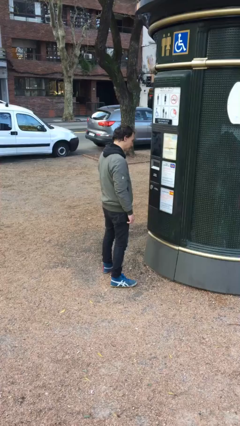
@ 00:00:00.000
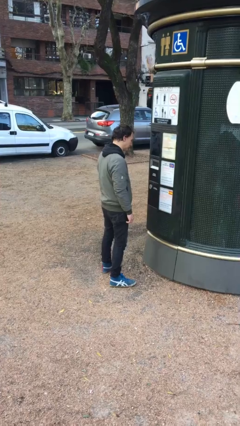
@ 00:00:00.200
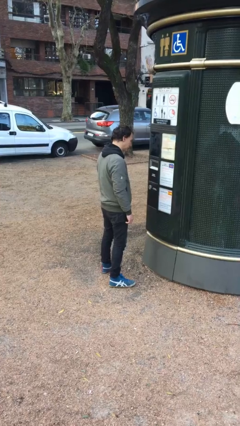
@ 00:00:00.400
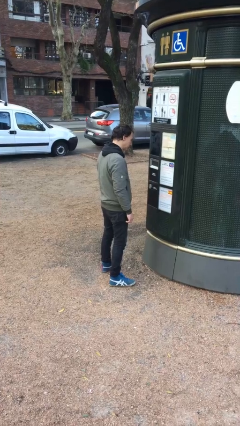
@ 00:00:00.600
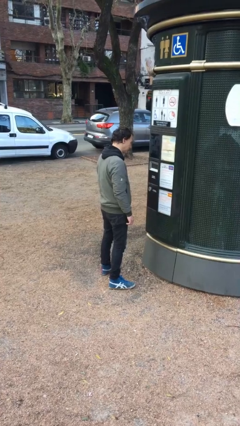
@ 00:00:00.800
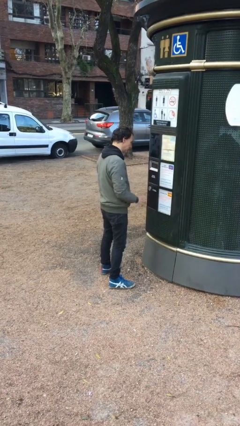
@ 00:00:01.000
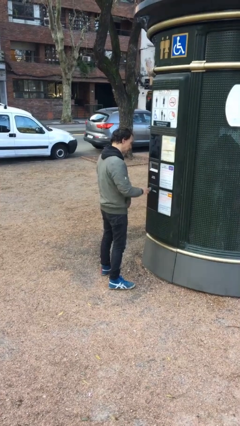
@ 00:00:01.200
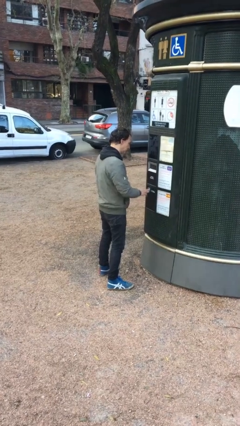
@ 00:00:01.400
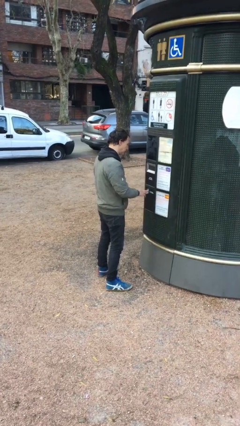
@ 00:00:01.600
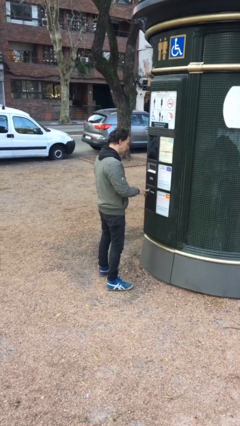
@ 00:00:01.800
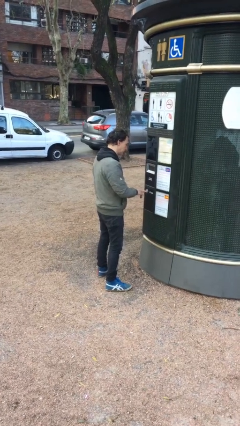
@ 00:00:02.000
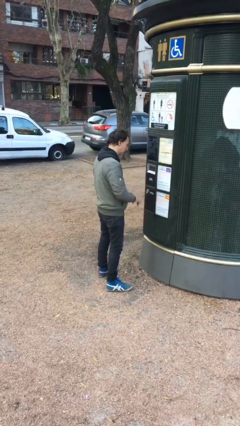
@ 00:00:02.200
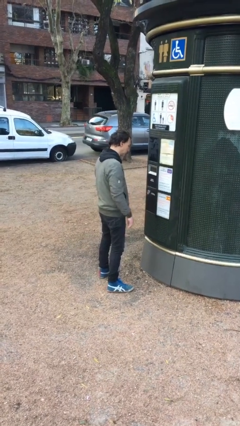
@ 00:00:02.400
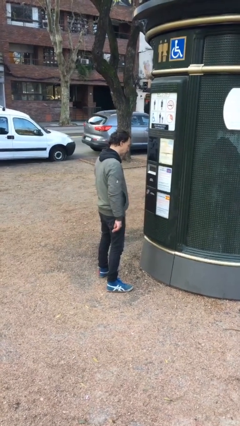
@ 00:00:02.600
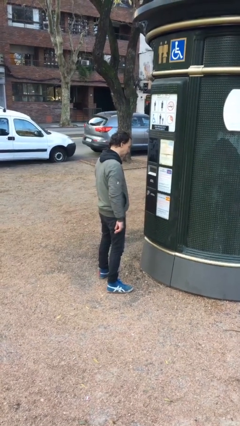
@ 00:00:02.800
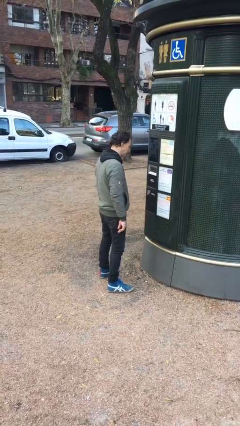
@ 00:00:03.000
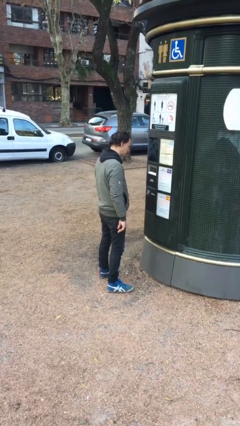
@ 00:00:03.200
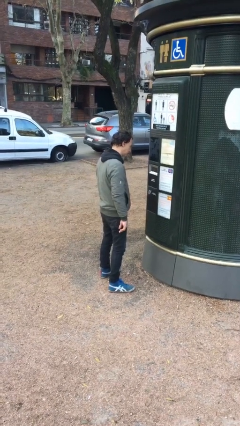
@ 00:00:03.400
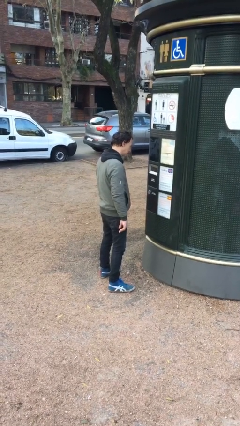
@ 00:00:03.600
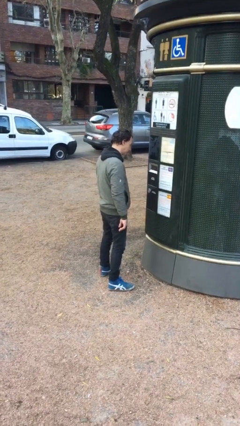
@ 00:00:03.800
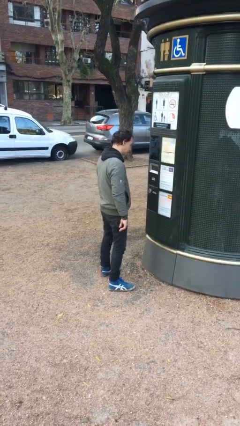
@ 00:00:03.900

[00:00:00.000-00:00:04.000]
person purchases from machine

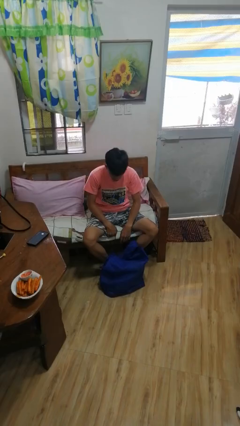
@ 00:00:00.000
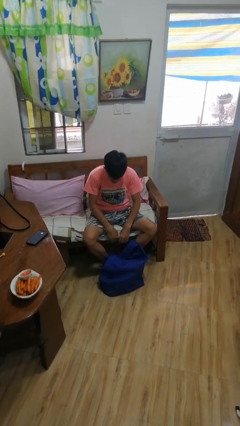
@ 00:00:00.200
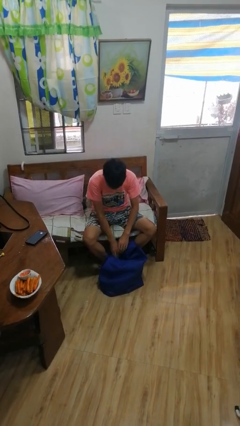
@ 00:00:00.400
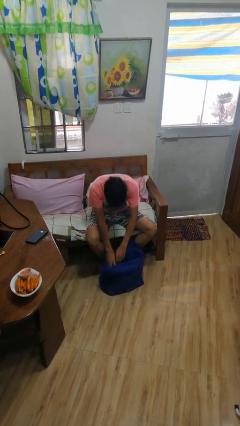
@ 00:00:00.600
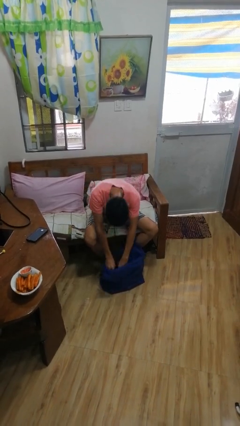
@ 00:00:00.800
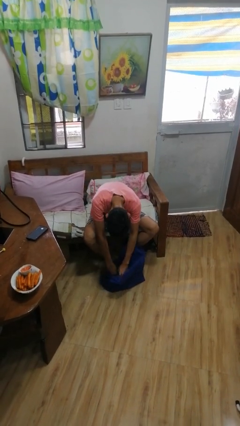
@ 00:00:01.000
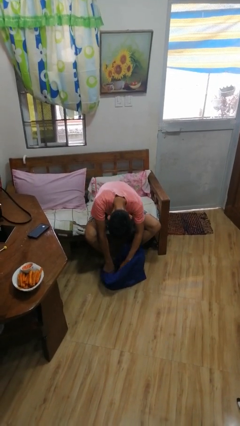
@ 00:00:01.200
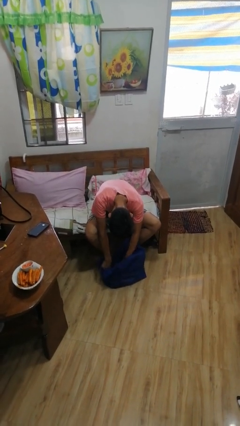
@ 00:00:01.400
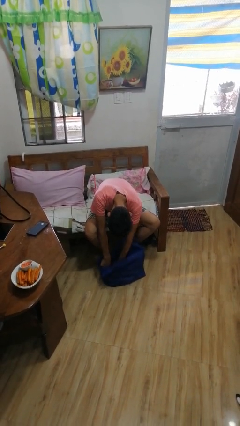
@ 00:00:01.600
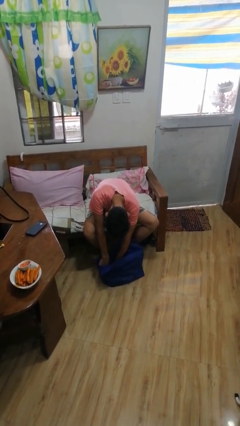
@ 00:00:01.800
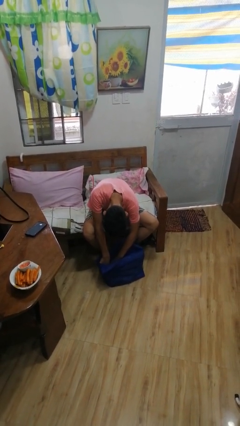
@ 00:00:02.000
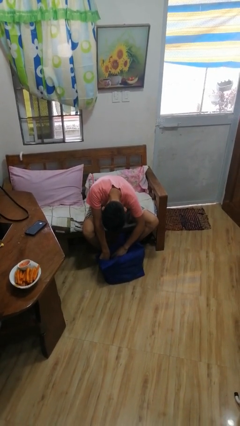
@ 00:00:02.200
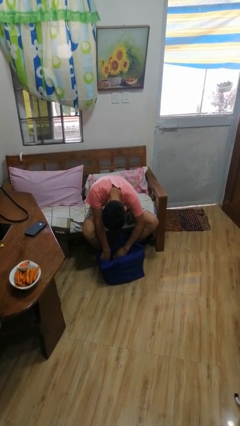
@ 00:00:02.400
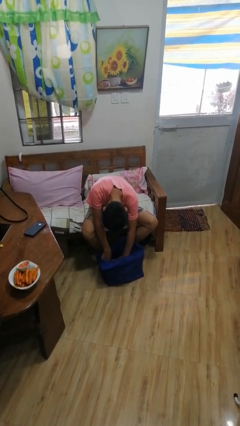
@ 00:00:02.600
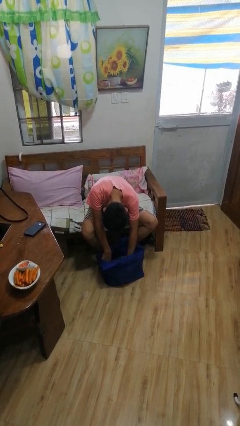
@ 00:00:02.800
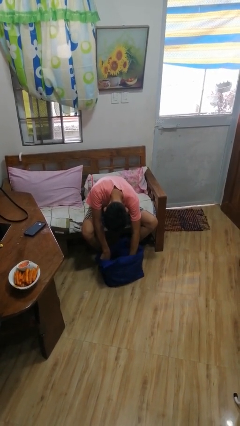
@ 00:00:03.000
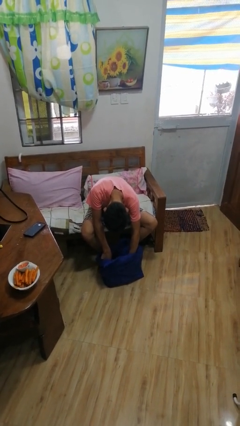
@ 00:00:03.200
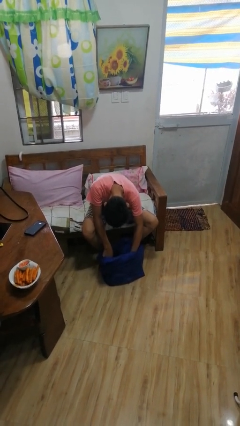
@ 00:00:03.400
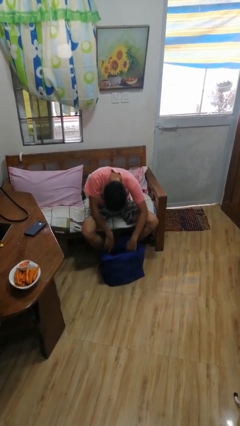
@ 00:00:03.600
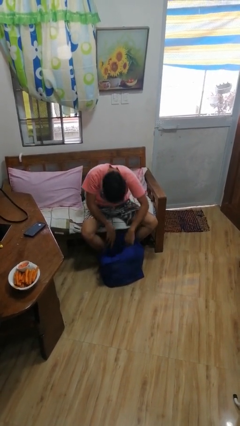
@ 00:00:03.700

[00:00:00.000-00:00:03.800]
person searches in bag

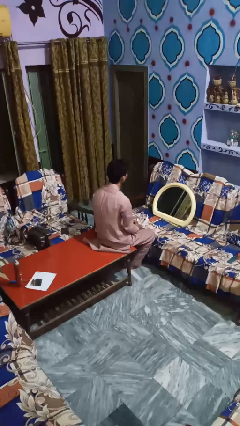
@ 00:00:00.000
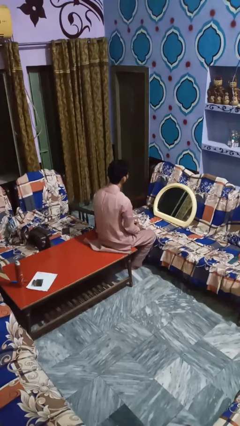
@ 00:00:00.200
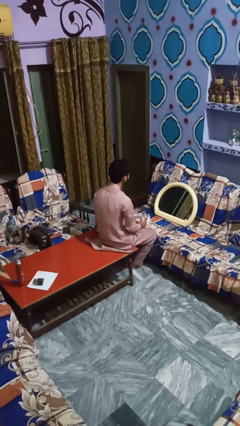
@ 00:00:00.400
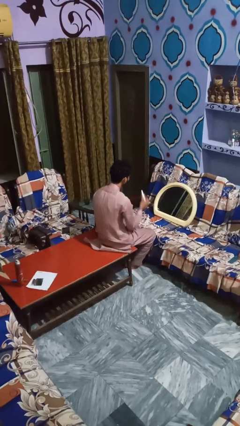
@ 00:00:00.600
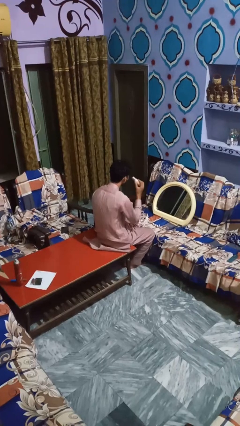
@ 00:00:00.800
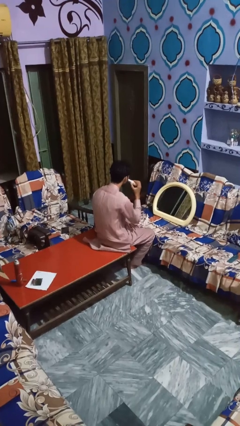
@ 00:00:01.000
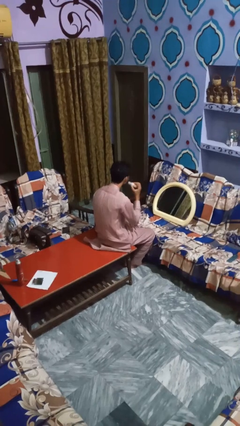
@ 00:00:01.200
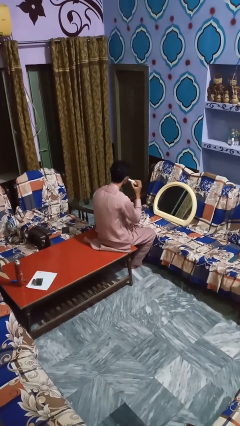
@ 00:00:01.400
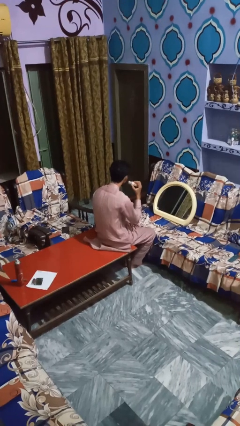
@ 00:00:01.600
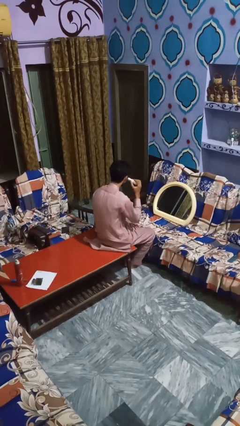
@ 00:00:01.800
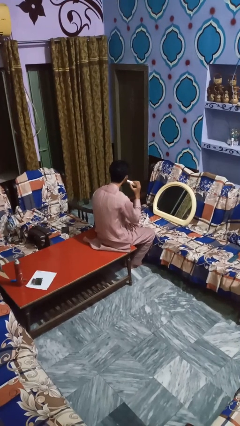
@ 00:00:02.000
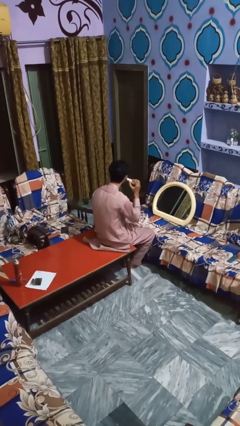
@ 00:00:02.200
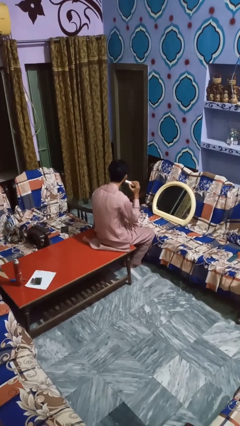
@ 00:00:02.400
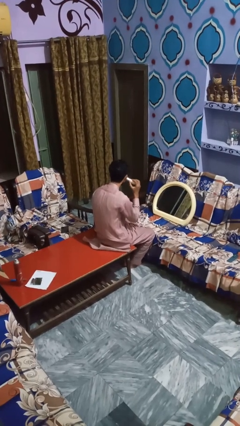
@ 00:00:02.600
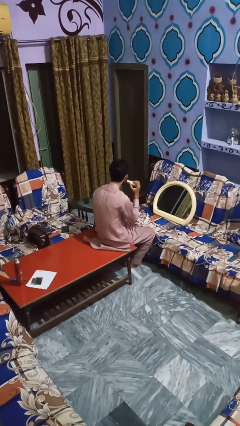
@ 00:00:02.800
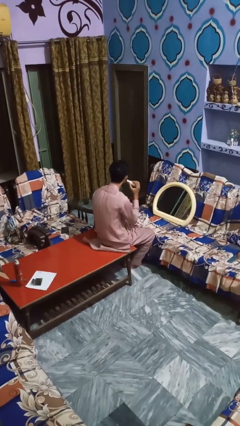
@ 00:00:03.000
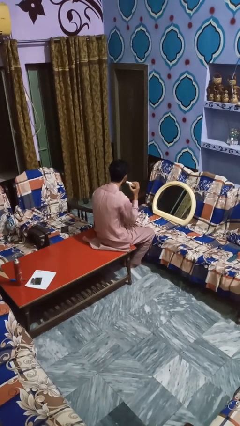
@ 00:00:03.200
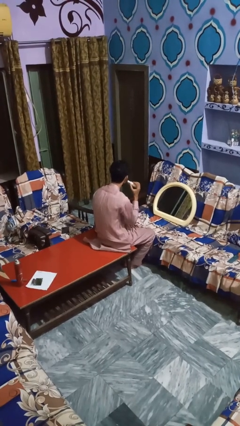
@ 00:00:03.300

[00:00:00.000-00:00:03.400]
person applies foundation makeup

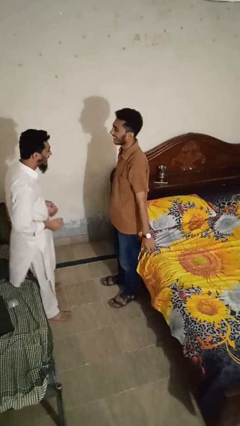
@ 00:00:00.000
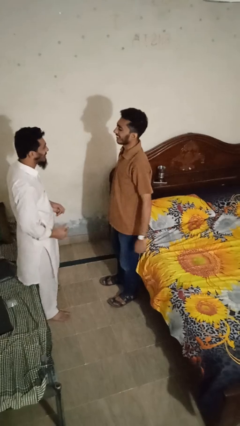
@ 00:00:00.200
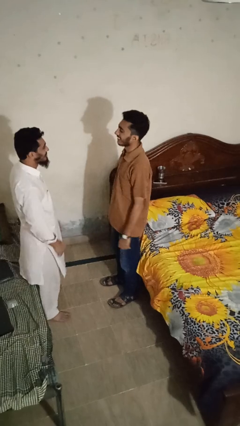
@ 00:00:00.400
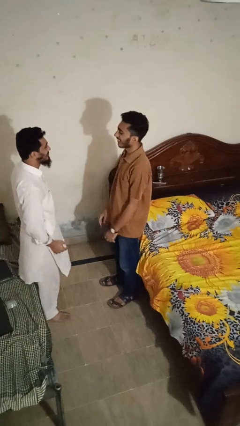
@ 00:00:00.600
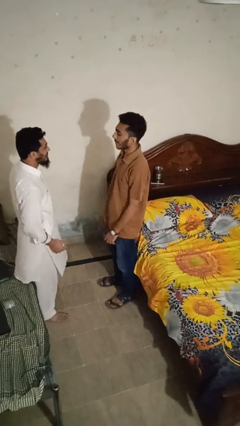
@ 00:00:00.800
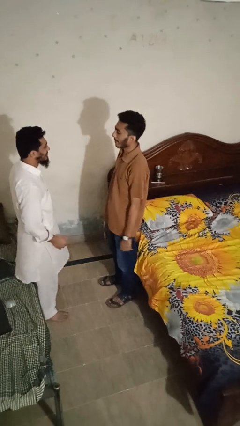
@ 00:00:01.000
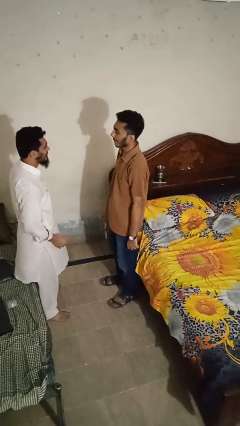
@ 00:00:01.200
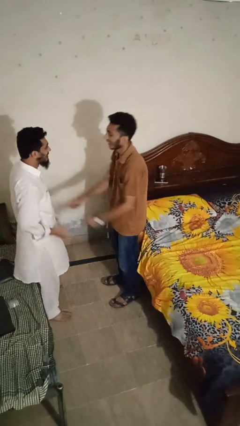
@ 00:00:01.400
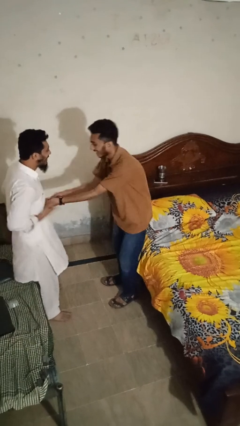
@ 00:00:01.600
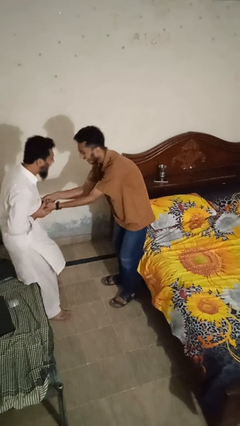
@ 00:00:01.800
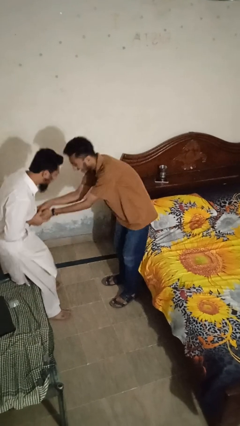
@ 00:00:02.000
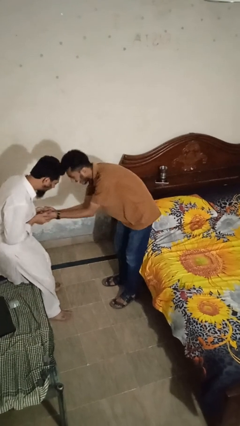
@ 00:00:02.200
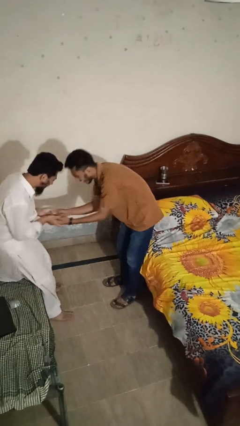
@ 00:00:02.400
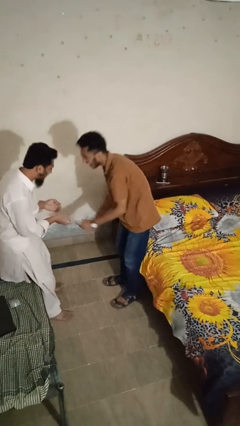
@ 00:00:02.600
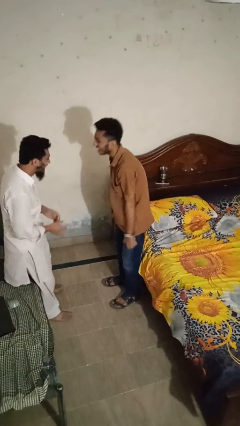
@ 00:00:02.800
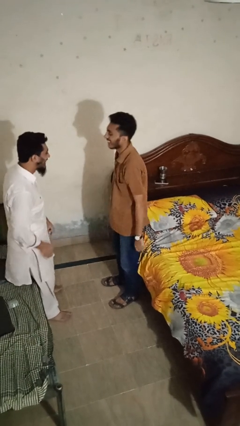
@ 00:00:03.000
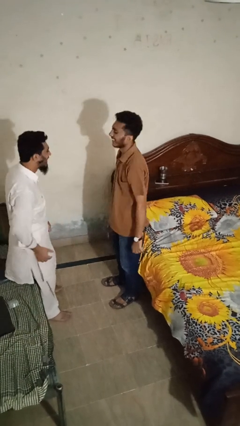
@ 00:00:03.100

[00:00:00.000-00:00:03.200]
person tickles person

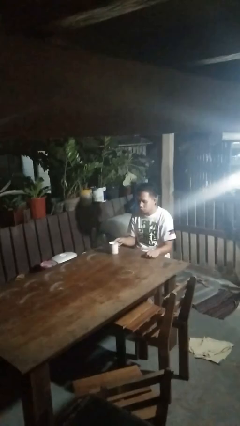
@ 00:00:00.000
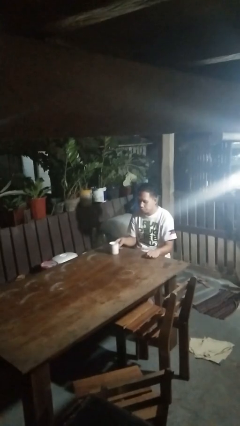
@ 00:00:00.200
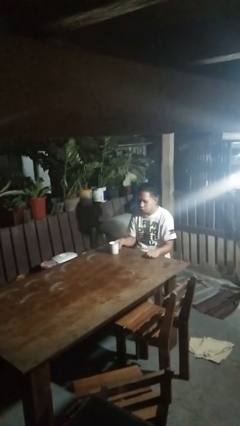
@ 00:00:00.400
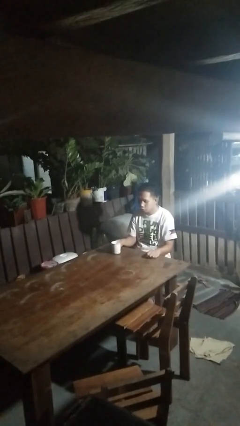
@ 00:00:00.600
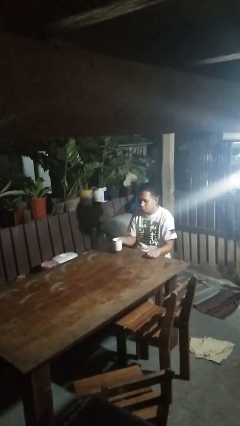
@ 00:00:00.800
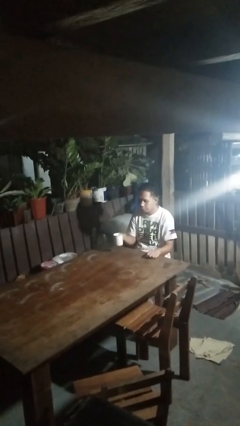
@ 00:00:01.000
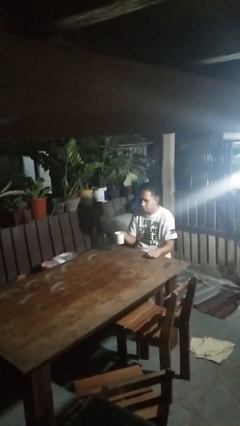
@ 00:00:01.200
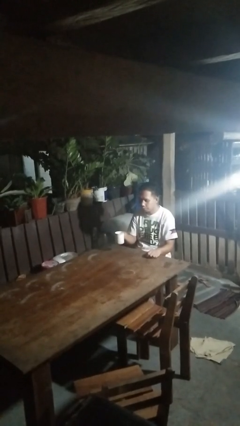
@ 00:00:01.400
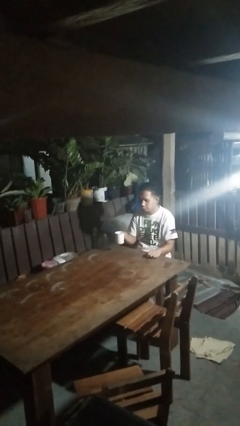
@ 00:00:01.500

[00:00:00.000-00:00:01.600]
person picks up object from table

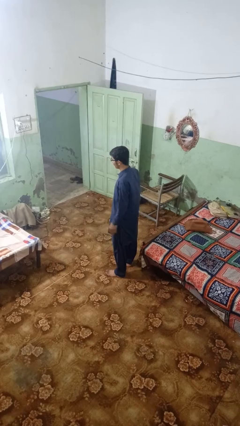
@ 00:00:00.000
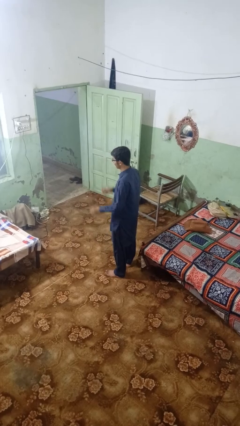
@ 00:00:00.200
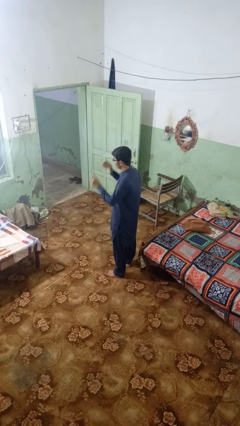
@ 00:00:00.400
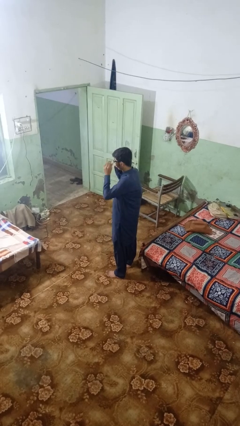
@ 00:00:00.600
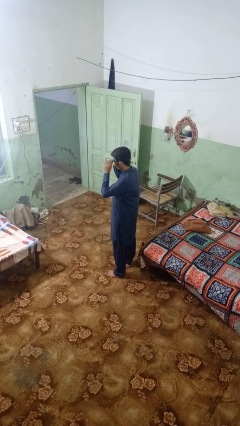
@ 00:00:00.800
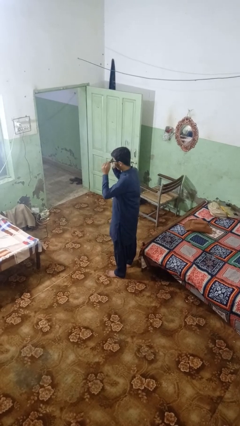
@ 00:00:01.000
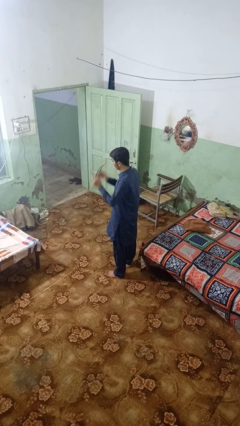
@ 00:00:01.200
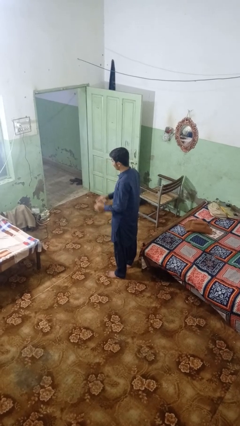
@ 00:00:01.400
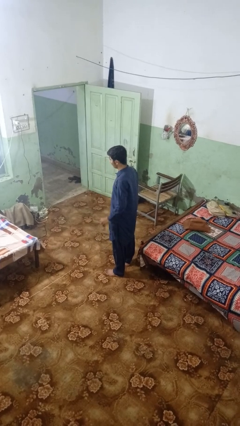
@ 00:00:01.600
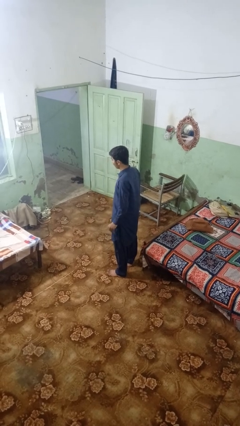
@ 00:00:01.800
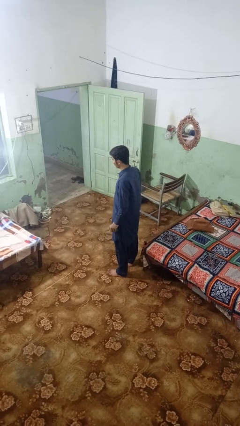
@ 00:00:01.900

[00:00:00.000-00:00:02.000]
person takes off glasses
